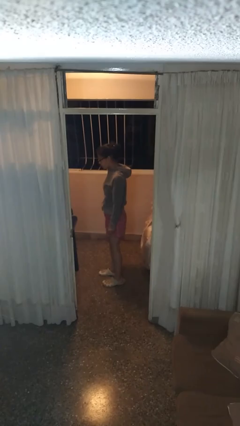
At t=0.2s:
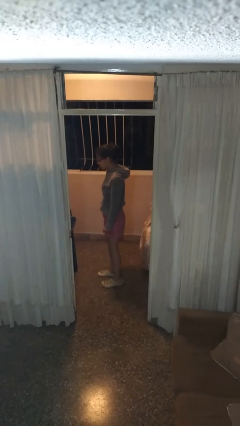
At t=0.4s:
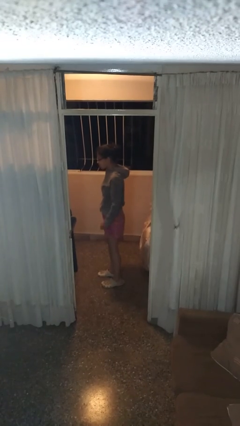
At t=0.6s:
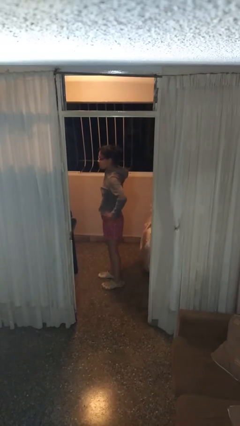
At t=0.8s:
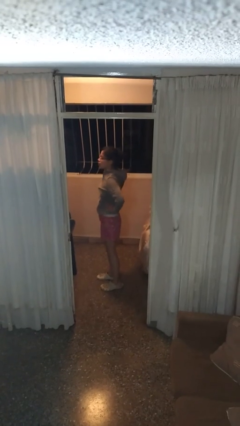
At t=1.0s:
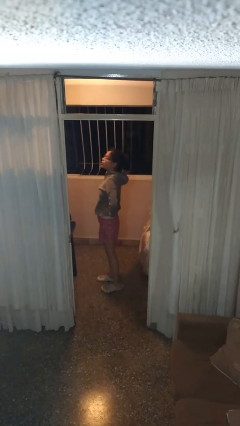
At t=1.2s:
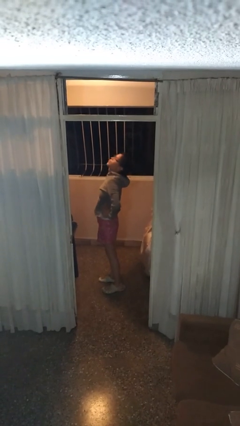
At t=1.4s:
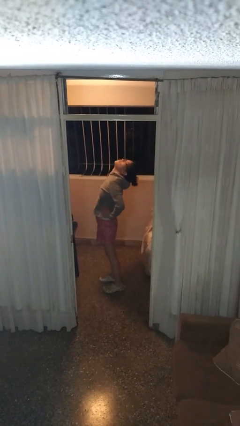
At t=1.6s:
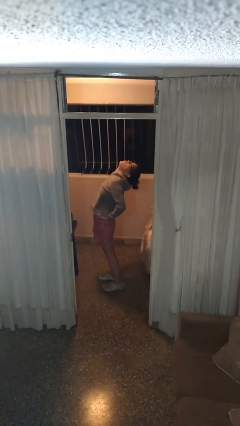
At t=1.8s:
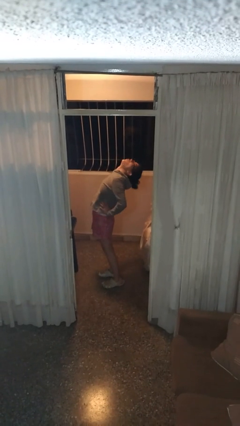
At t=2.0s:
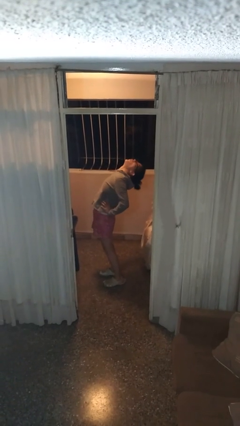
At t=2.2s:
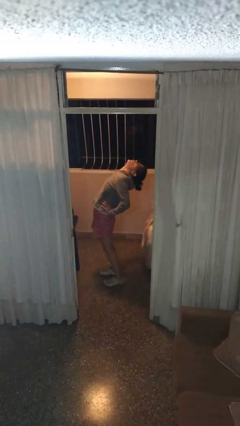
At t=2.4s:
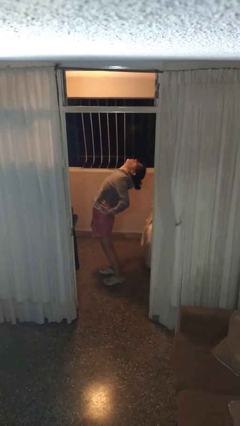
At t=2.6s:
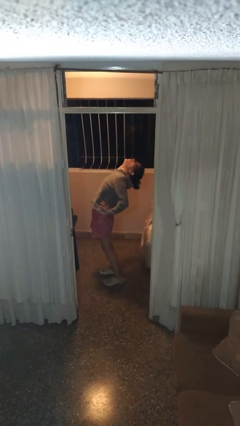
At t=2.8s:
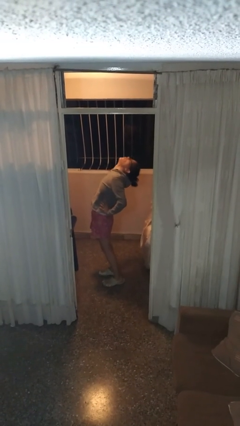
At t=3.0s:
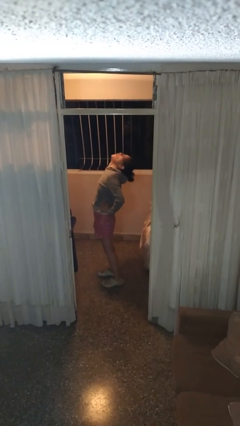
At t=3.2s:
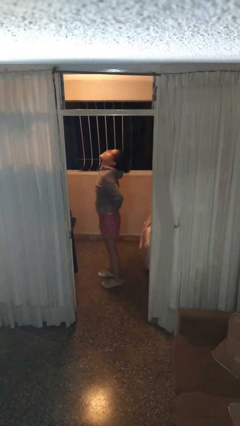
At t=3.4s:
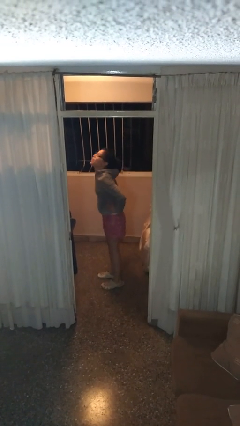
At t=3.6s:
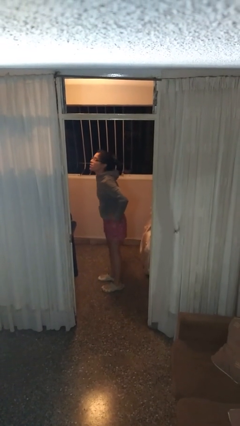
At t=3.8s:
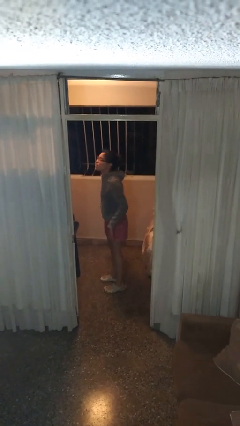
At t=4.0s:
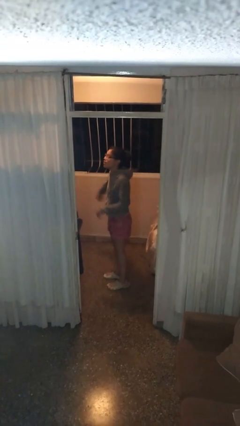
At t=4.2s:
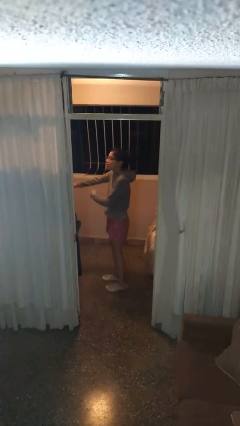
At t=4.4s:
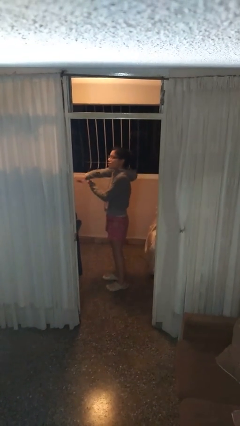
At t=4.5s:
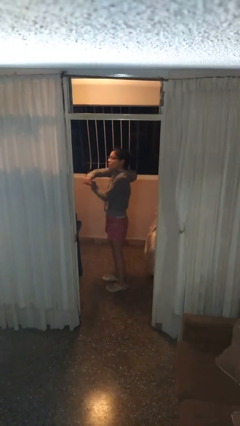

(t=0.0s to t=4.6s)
person stretches back

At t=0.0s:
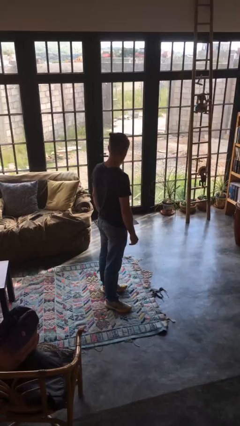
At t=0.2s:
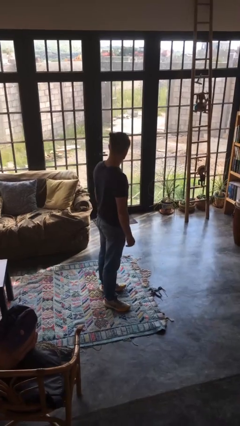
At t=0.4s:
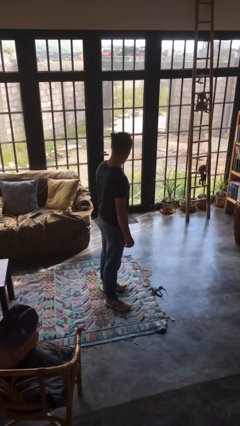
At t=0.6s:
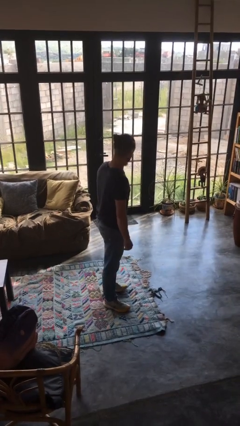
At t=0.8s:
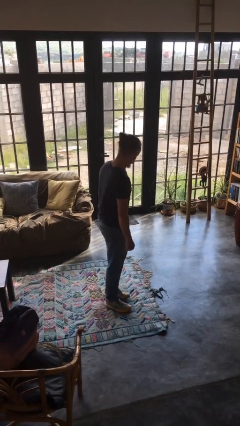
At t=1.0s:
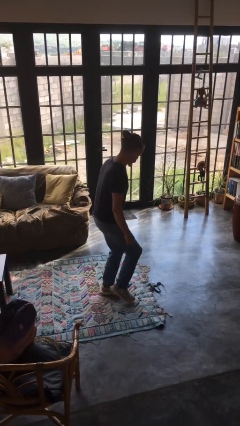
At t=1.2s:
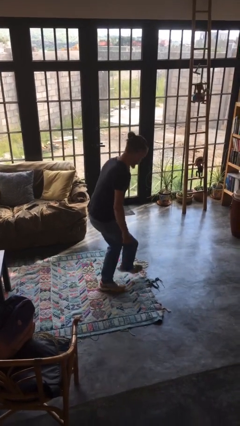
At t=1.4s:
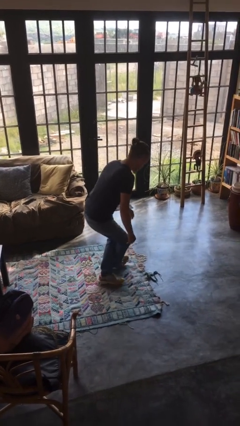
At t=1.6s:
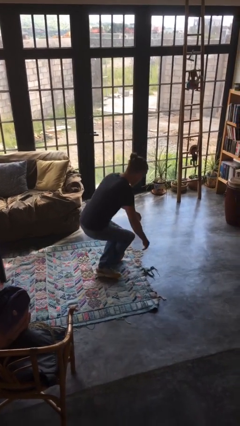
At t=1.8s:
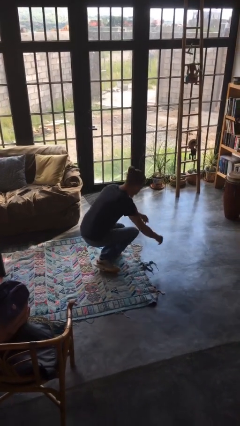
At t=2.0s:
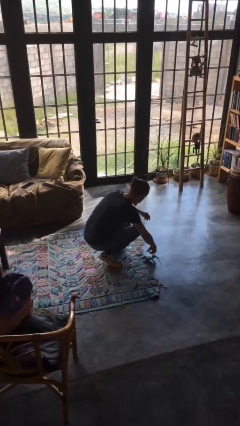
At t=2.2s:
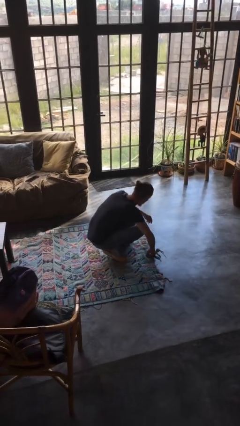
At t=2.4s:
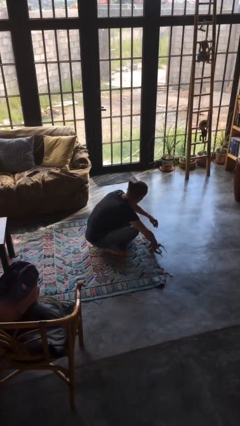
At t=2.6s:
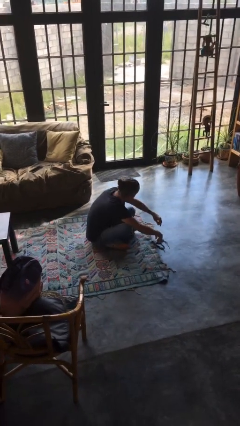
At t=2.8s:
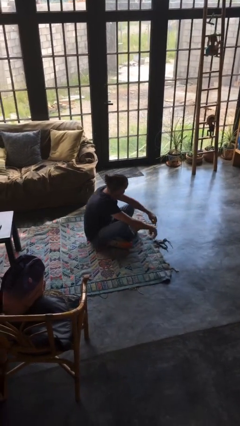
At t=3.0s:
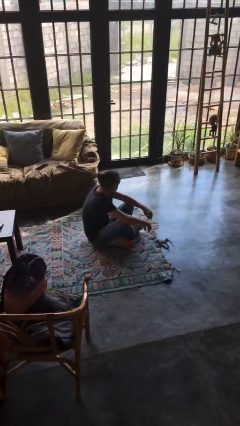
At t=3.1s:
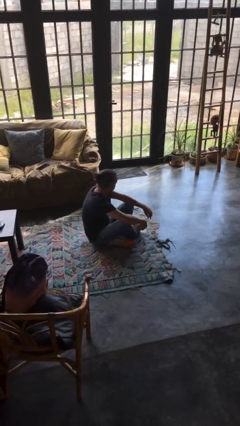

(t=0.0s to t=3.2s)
person sits crisscross

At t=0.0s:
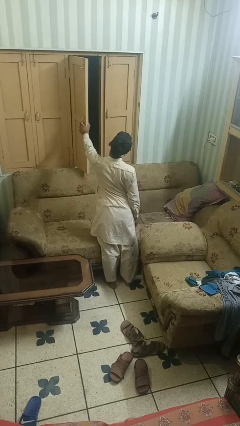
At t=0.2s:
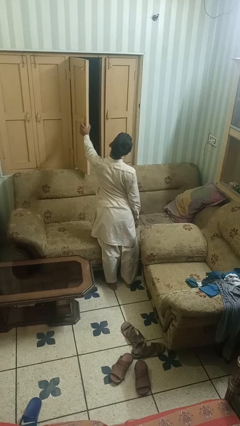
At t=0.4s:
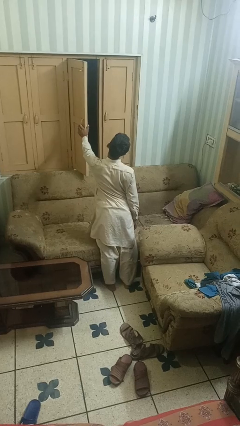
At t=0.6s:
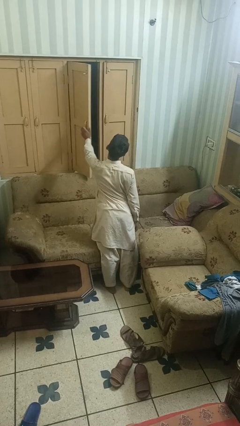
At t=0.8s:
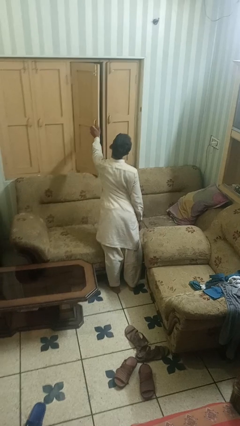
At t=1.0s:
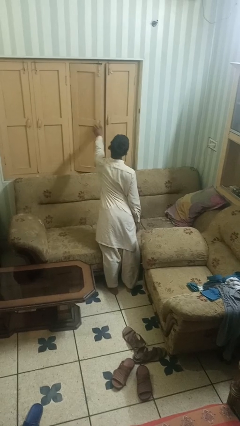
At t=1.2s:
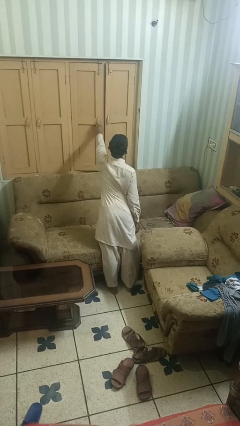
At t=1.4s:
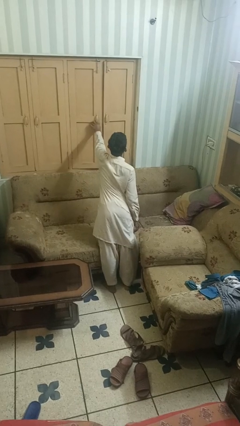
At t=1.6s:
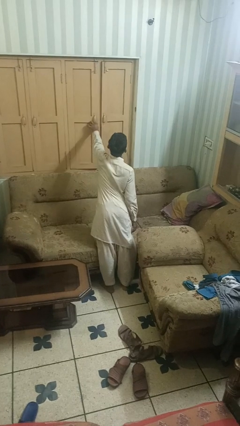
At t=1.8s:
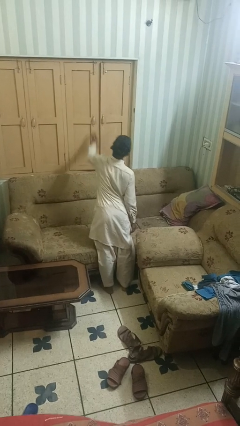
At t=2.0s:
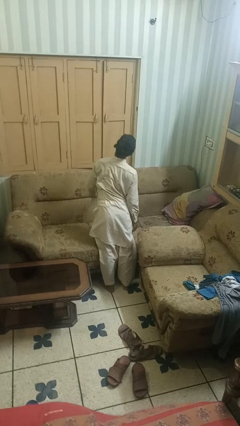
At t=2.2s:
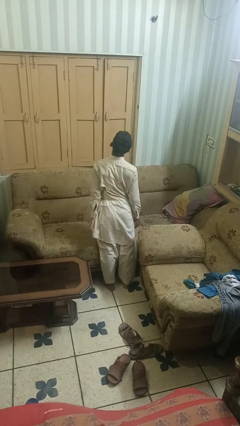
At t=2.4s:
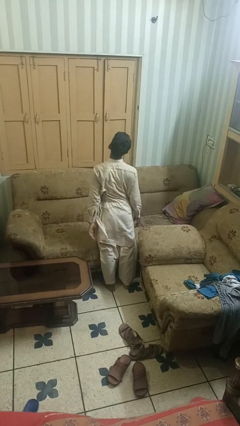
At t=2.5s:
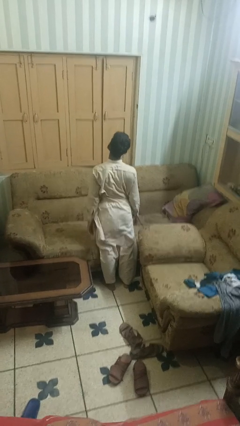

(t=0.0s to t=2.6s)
person closes home window

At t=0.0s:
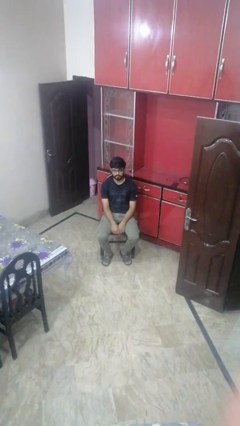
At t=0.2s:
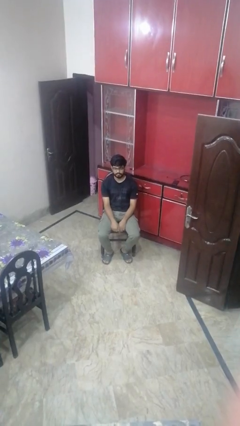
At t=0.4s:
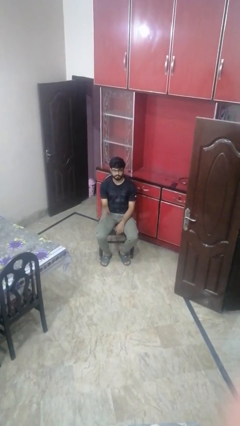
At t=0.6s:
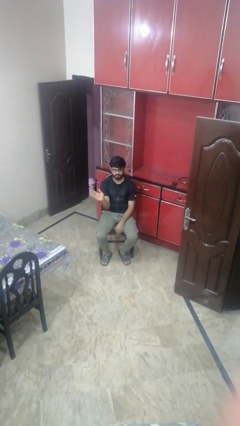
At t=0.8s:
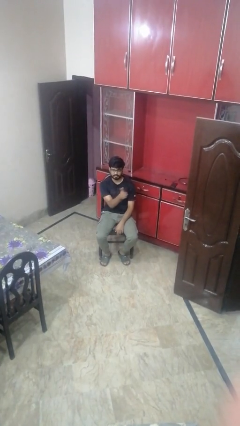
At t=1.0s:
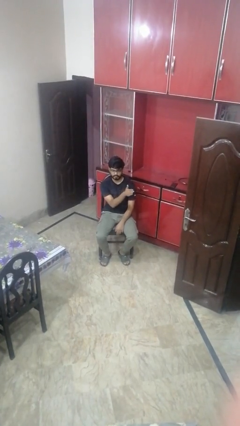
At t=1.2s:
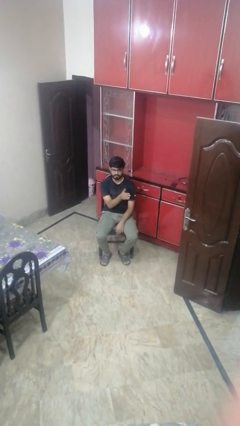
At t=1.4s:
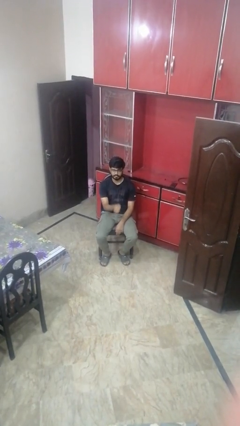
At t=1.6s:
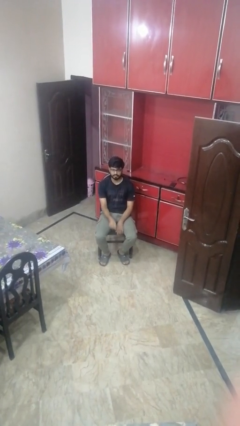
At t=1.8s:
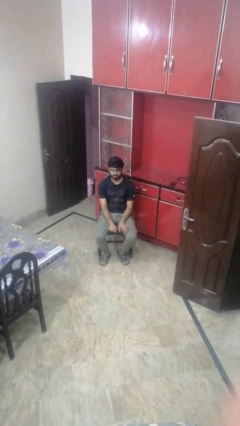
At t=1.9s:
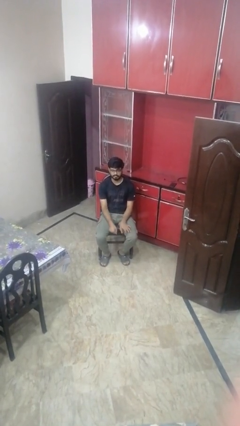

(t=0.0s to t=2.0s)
person gestures swipe left

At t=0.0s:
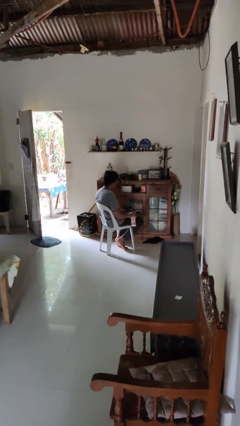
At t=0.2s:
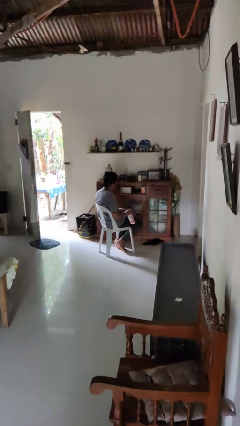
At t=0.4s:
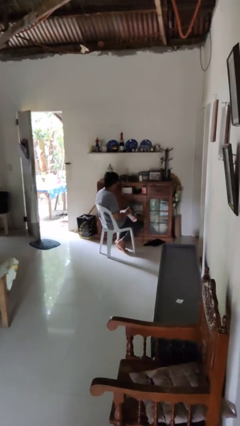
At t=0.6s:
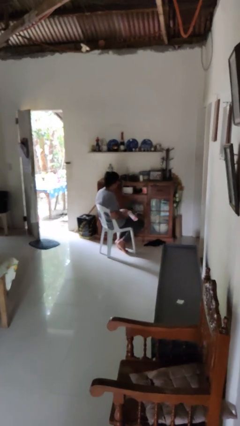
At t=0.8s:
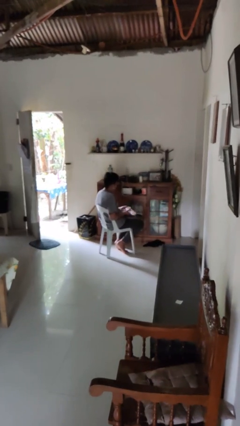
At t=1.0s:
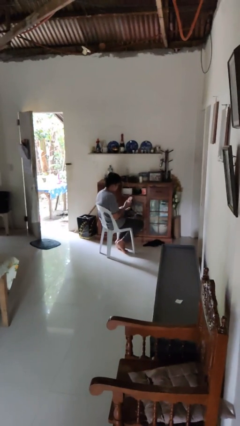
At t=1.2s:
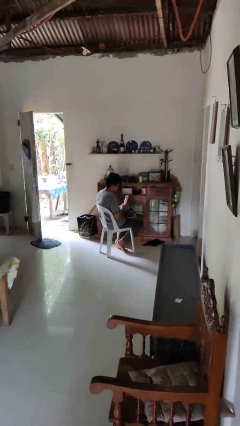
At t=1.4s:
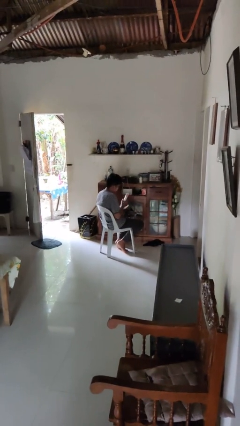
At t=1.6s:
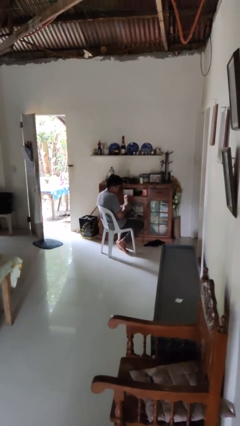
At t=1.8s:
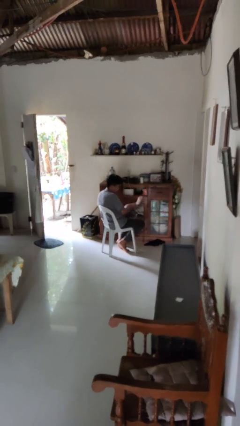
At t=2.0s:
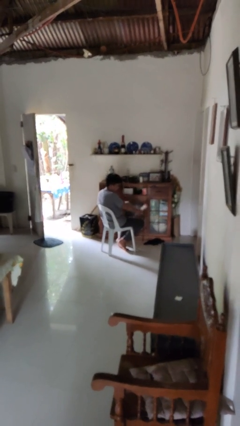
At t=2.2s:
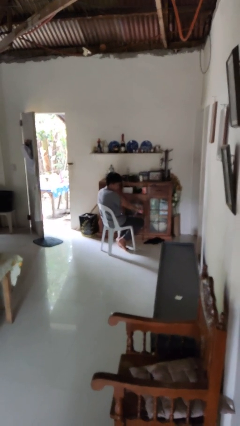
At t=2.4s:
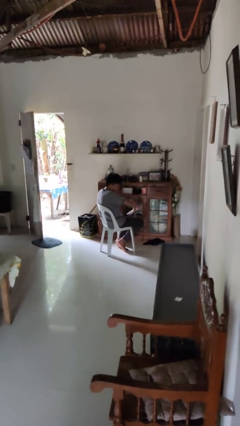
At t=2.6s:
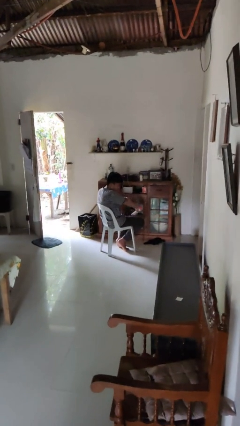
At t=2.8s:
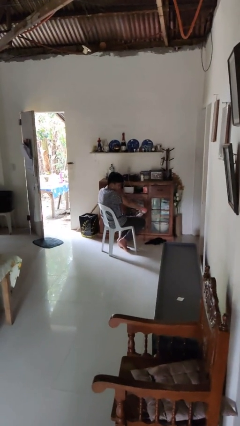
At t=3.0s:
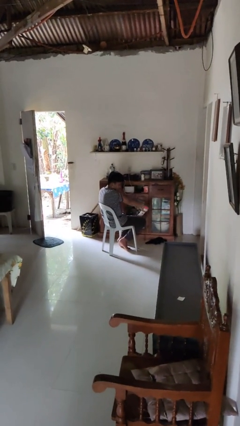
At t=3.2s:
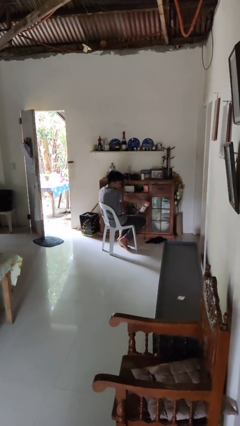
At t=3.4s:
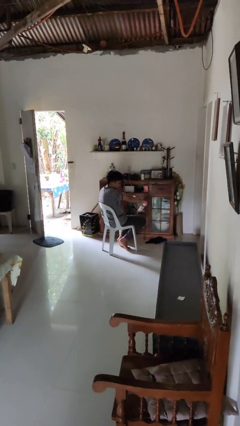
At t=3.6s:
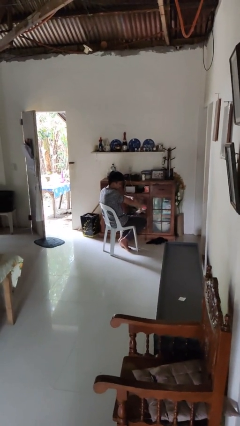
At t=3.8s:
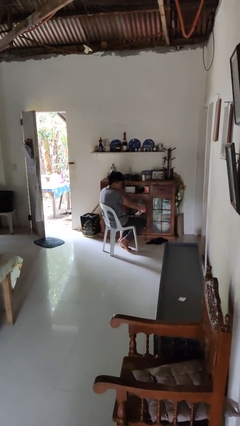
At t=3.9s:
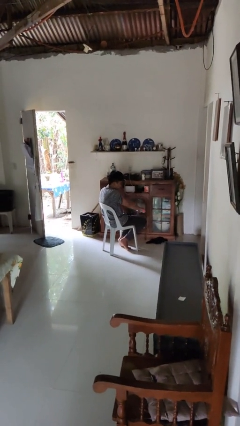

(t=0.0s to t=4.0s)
person applies sunscreen

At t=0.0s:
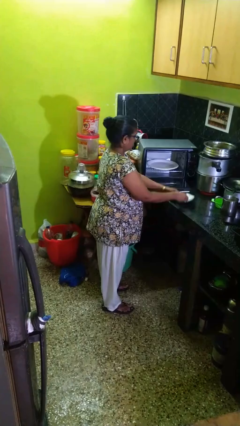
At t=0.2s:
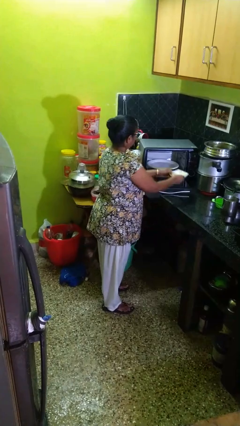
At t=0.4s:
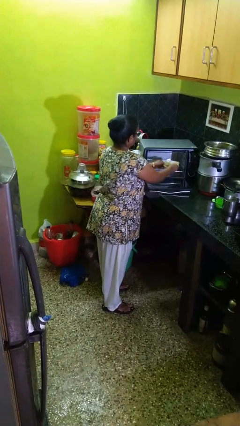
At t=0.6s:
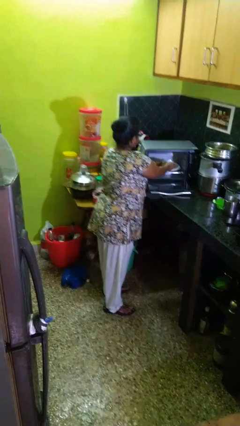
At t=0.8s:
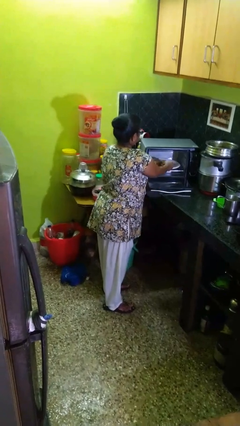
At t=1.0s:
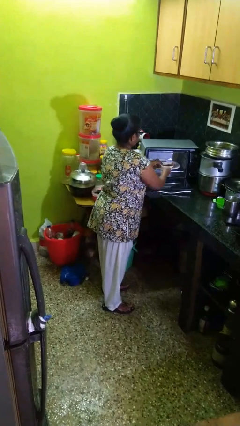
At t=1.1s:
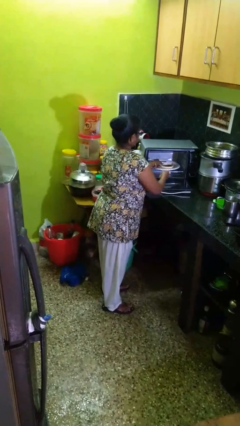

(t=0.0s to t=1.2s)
person puts object into microwave
